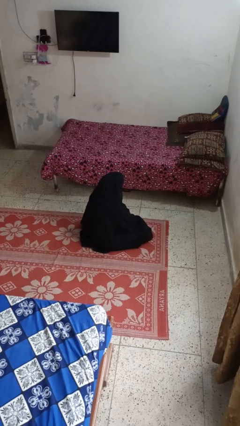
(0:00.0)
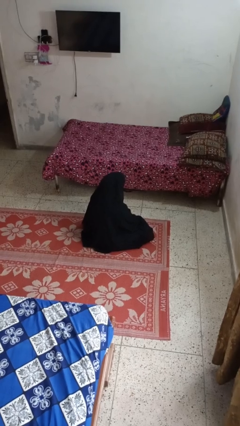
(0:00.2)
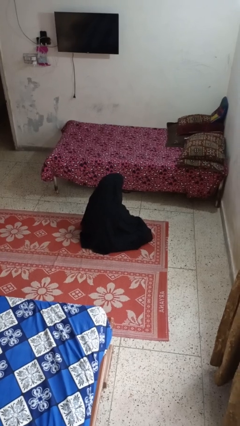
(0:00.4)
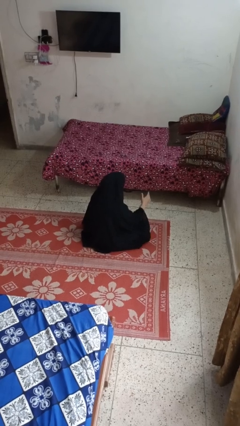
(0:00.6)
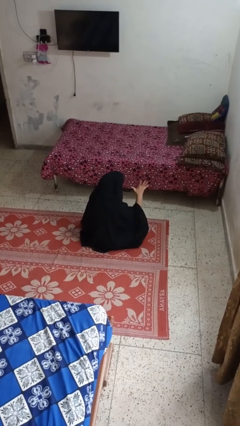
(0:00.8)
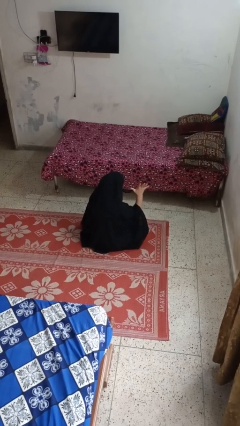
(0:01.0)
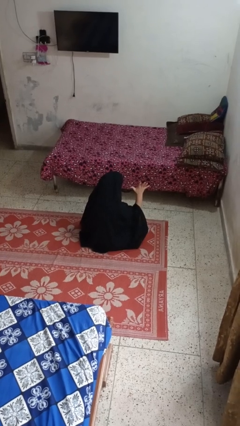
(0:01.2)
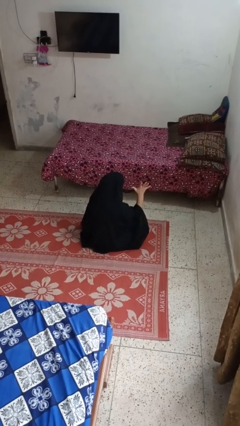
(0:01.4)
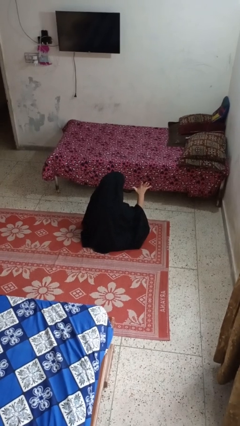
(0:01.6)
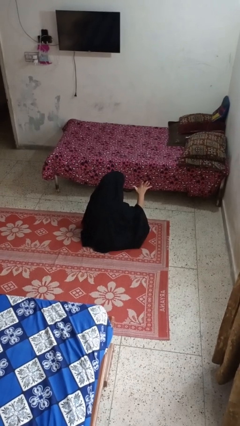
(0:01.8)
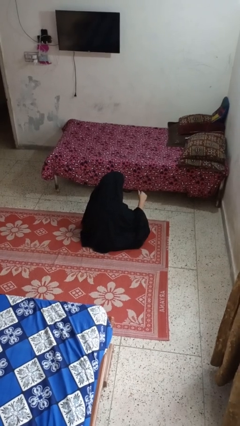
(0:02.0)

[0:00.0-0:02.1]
person gestures number five

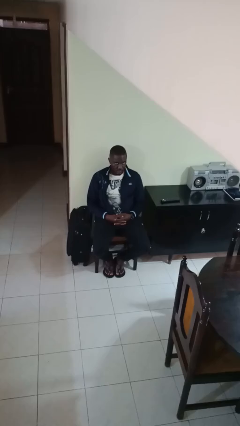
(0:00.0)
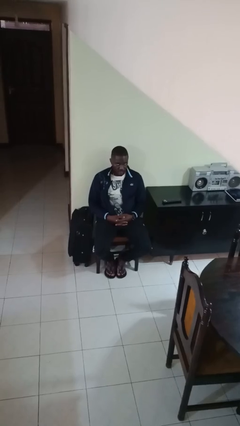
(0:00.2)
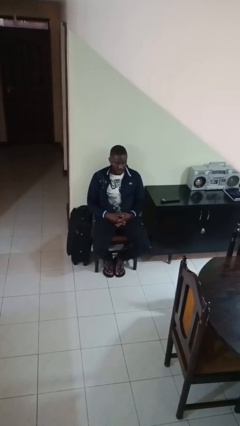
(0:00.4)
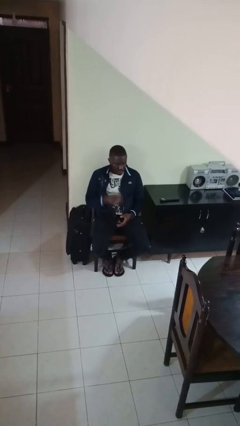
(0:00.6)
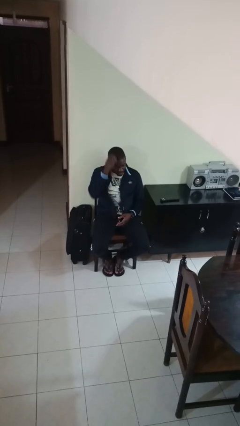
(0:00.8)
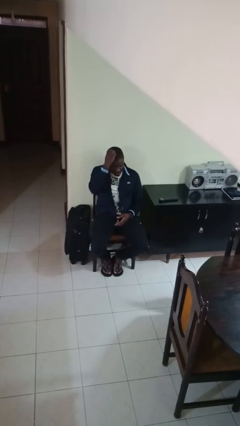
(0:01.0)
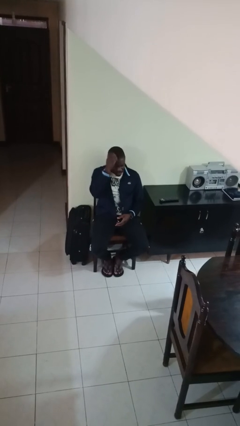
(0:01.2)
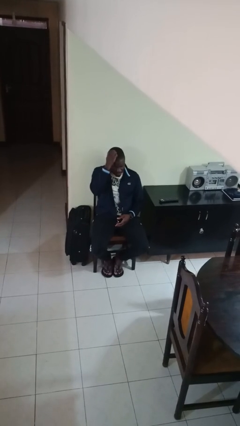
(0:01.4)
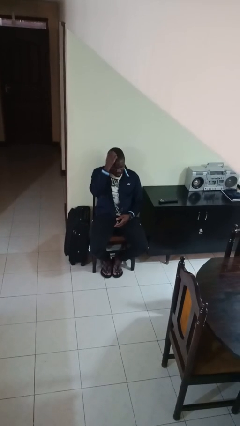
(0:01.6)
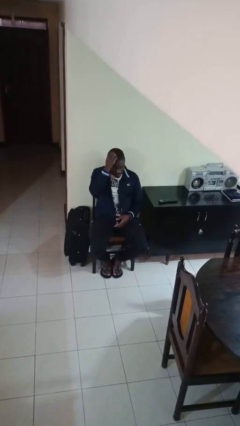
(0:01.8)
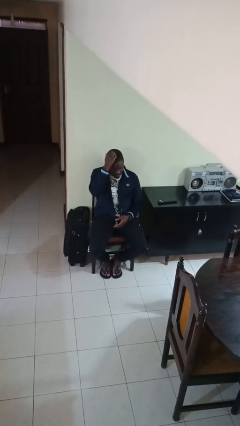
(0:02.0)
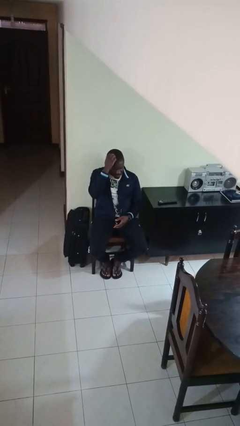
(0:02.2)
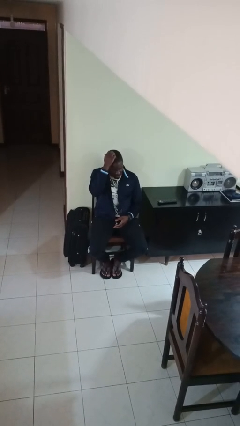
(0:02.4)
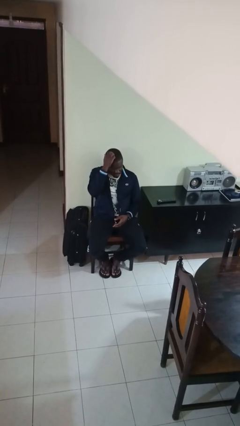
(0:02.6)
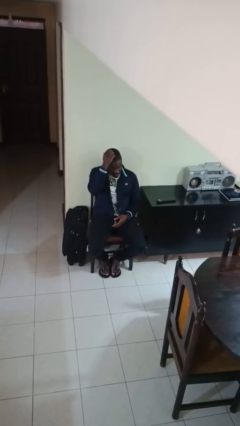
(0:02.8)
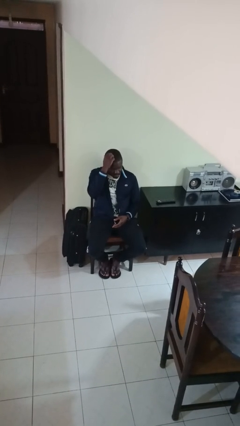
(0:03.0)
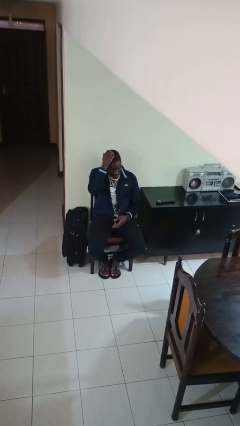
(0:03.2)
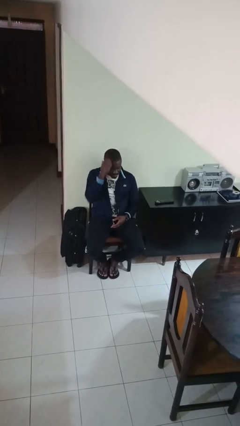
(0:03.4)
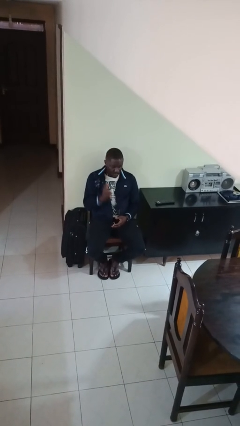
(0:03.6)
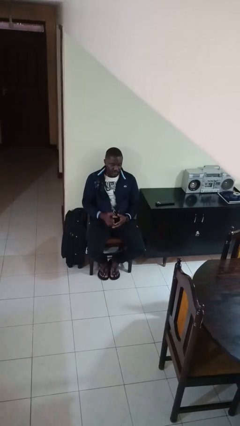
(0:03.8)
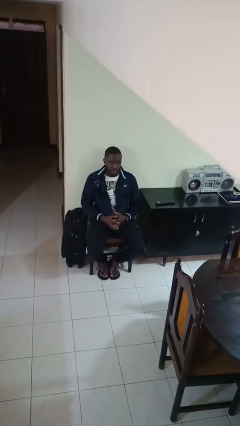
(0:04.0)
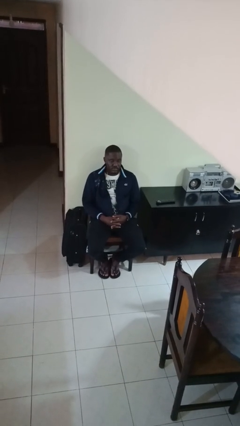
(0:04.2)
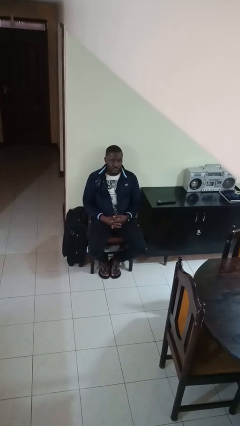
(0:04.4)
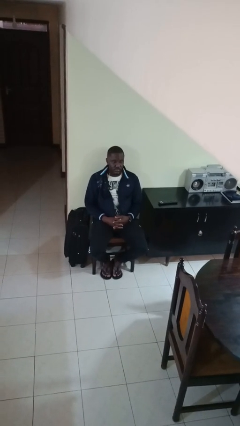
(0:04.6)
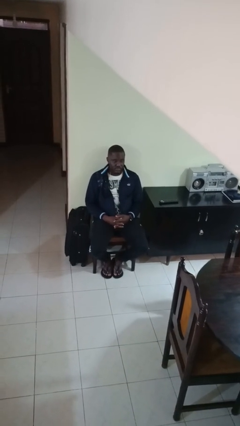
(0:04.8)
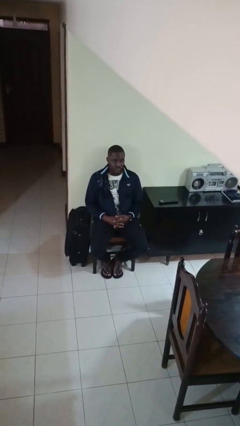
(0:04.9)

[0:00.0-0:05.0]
person scratches face

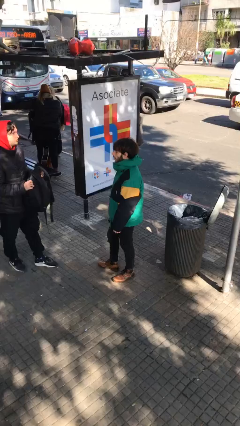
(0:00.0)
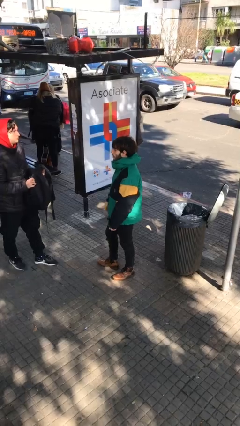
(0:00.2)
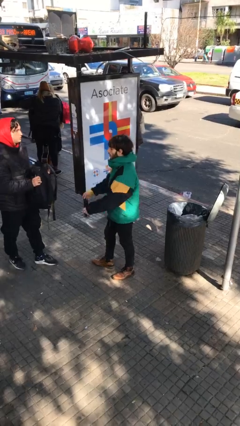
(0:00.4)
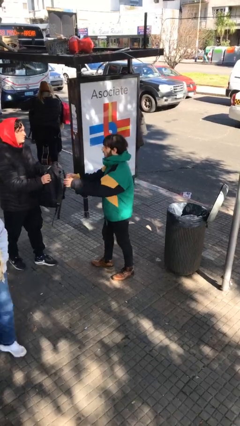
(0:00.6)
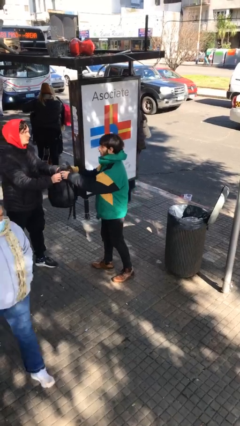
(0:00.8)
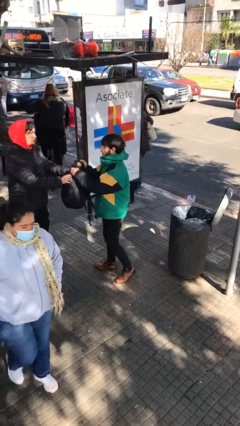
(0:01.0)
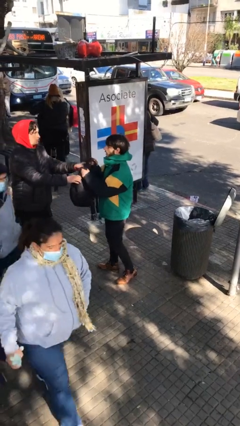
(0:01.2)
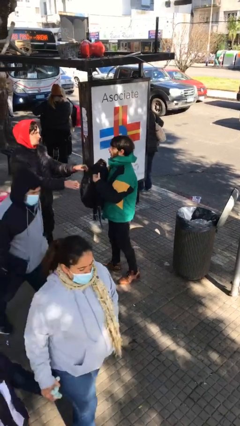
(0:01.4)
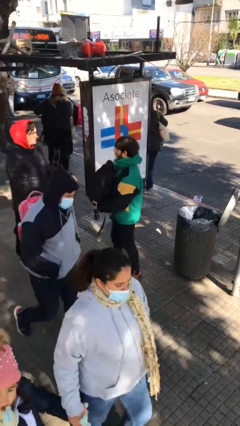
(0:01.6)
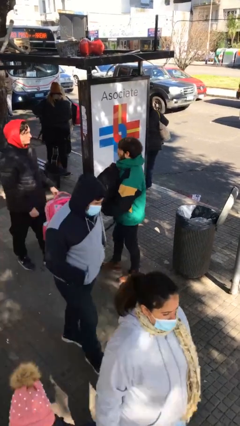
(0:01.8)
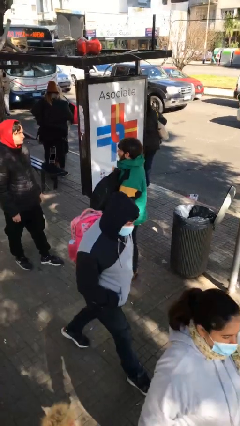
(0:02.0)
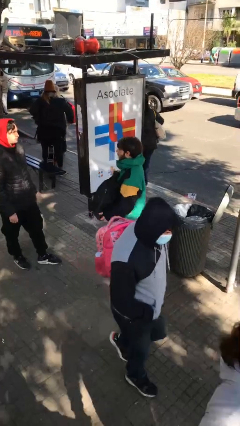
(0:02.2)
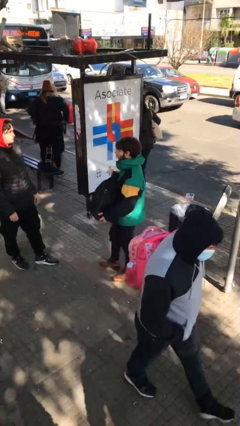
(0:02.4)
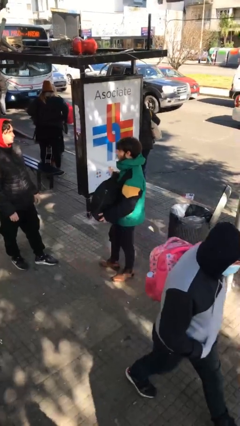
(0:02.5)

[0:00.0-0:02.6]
person transfers object to person

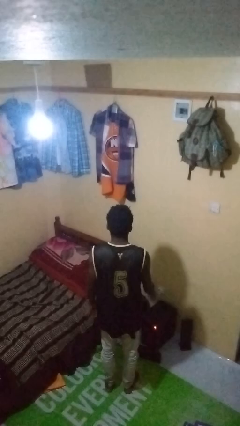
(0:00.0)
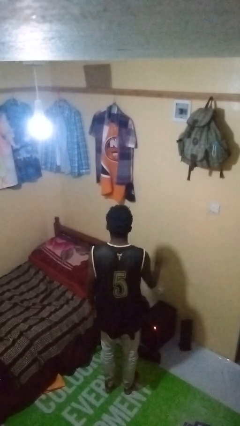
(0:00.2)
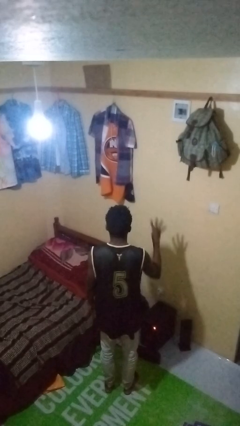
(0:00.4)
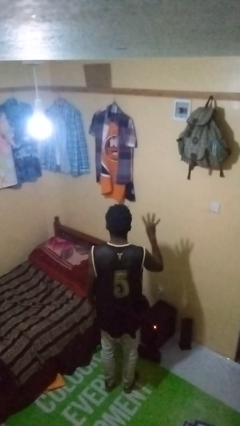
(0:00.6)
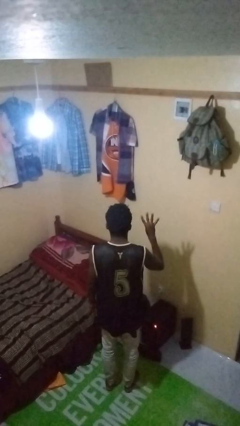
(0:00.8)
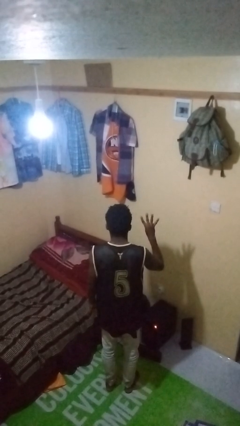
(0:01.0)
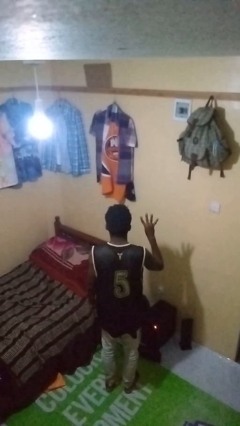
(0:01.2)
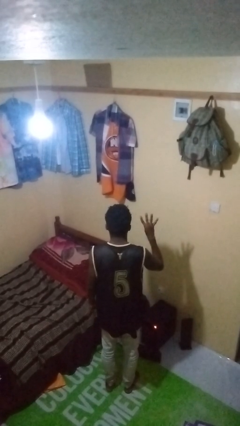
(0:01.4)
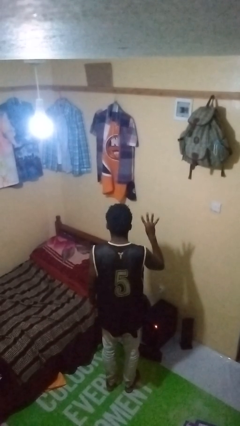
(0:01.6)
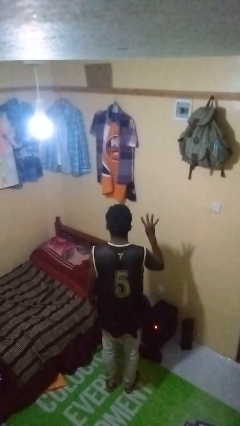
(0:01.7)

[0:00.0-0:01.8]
person gestures number four

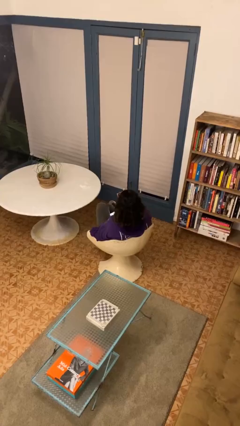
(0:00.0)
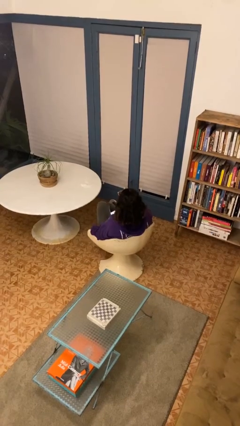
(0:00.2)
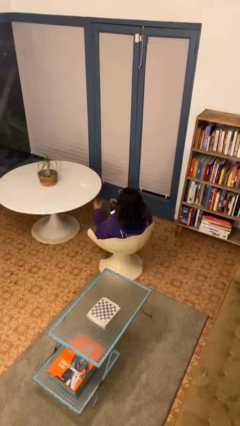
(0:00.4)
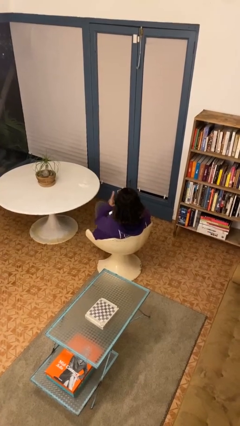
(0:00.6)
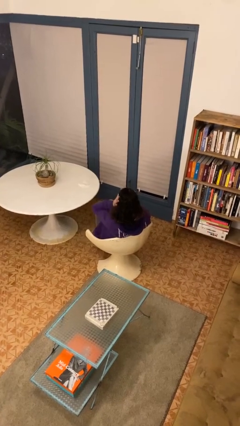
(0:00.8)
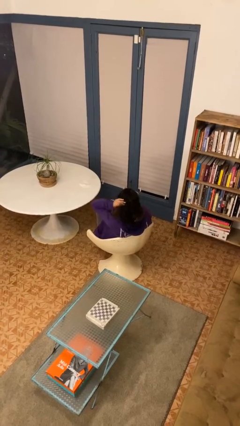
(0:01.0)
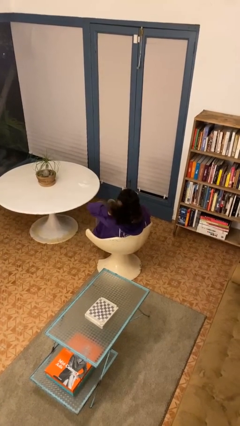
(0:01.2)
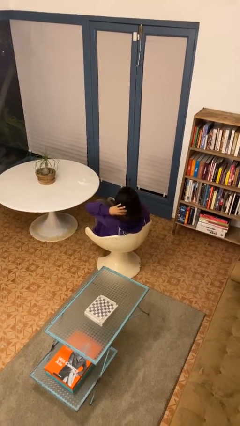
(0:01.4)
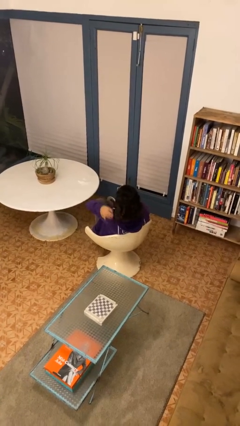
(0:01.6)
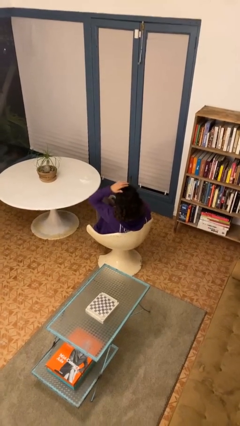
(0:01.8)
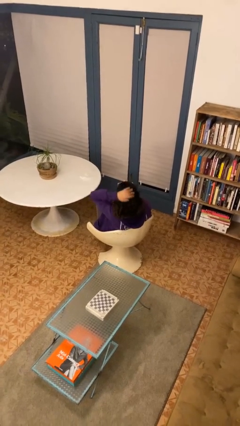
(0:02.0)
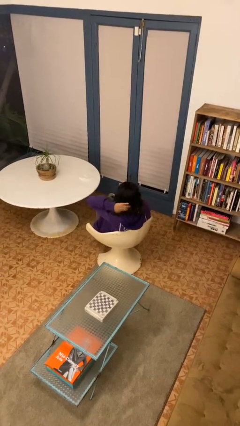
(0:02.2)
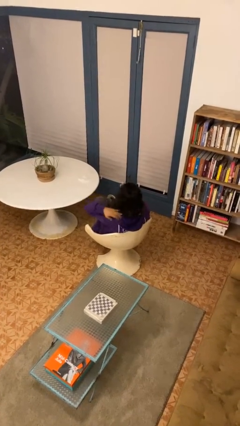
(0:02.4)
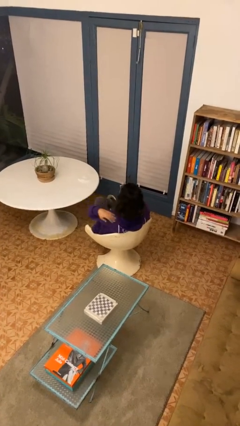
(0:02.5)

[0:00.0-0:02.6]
person strokes hair

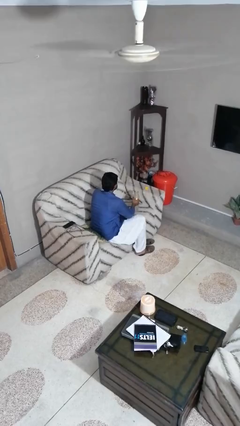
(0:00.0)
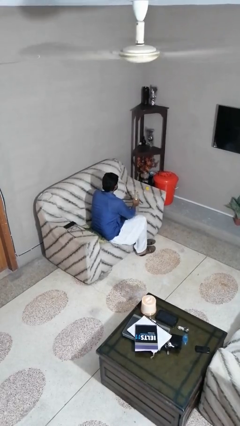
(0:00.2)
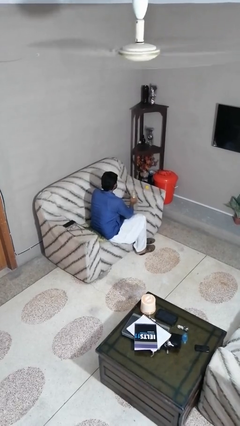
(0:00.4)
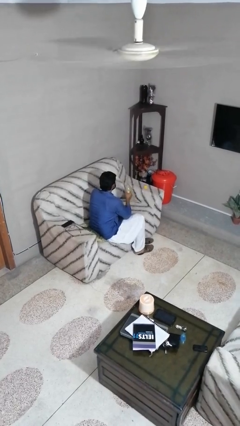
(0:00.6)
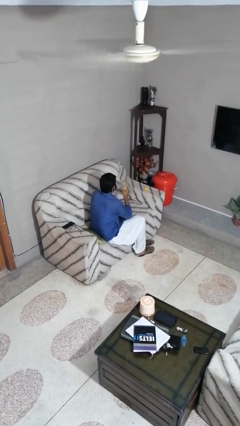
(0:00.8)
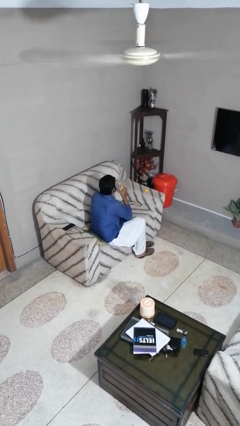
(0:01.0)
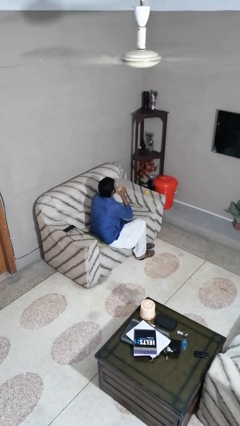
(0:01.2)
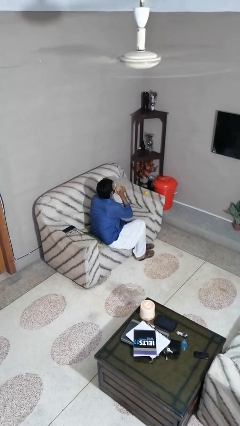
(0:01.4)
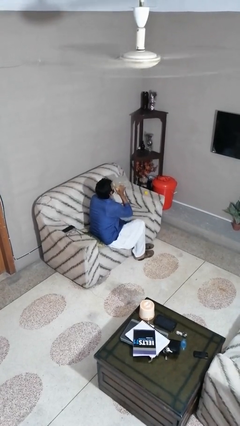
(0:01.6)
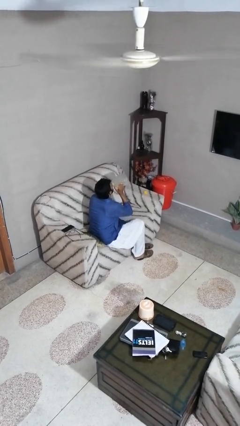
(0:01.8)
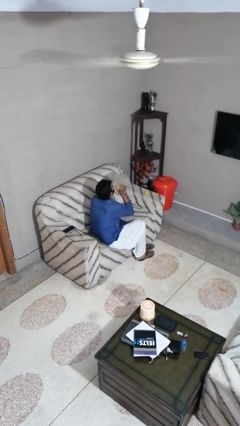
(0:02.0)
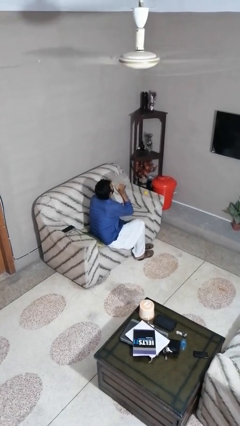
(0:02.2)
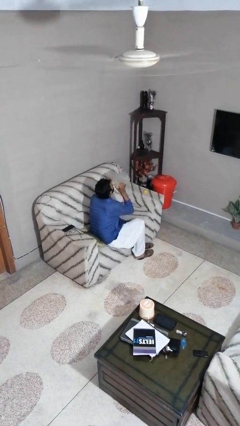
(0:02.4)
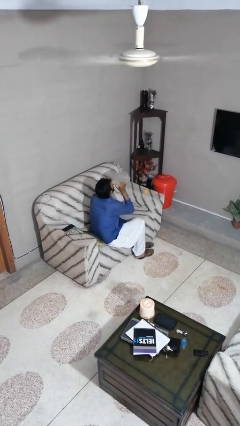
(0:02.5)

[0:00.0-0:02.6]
person drinks from bottle

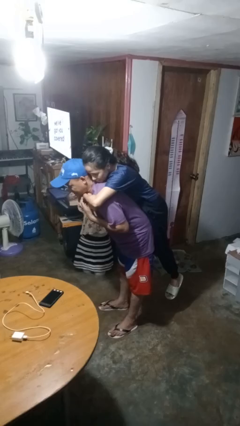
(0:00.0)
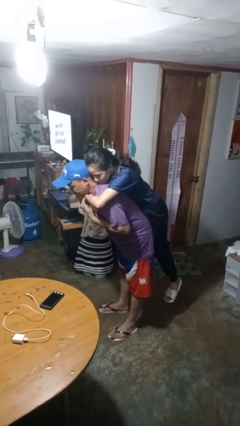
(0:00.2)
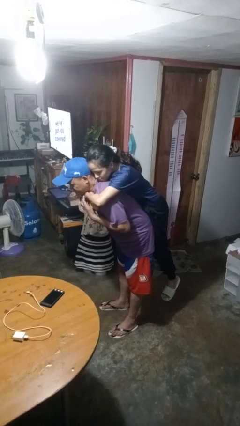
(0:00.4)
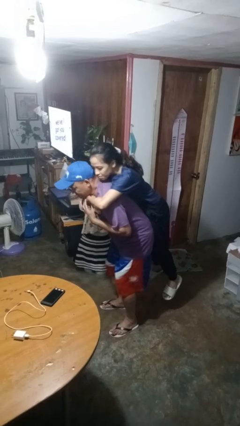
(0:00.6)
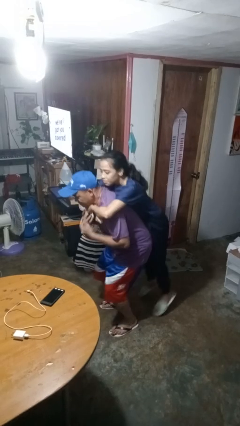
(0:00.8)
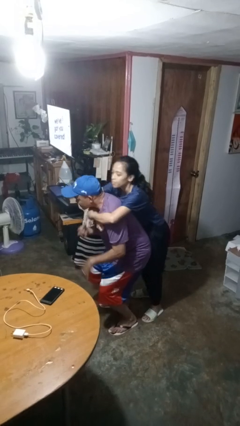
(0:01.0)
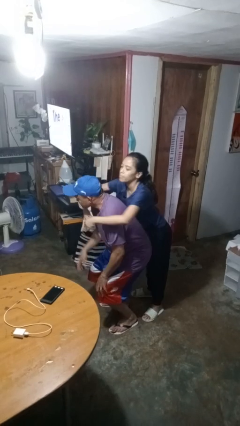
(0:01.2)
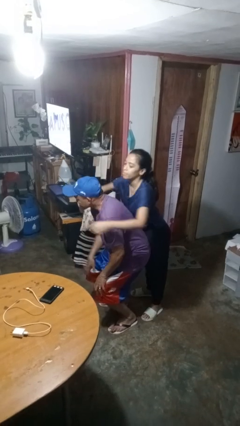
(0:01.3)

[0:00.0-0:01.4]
person puts down person
